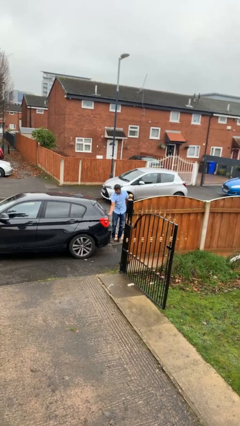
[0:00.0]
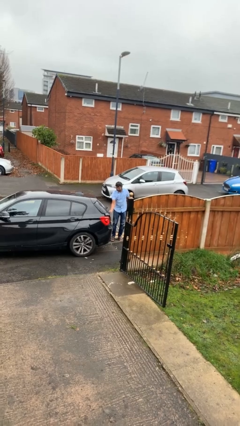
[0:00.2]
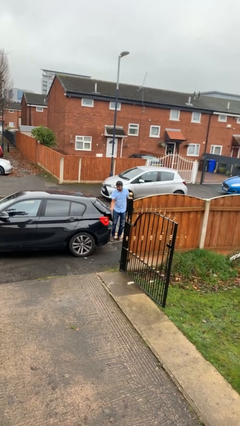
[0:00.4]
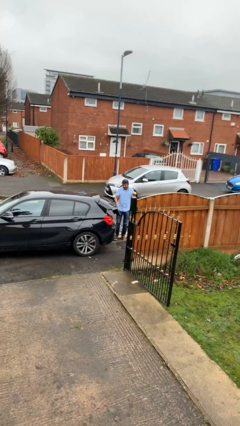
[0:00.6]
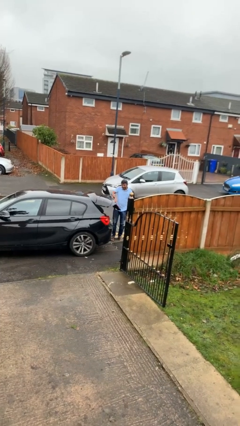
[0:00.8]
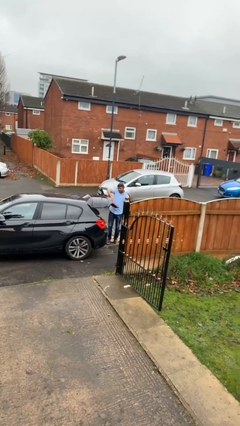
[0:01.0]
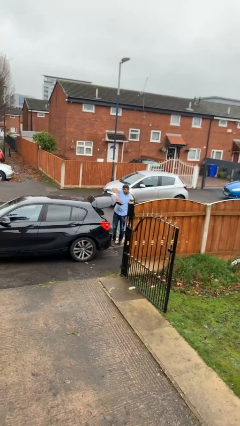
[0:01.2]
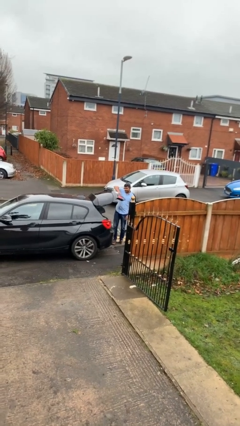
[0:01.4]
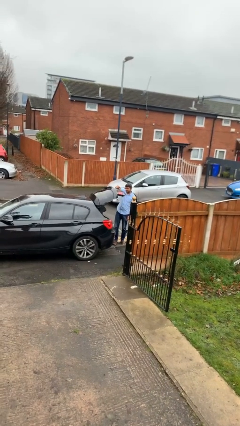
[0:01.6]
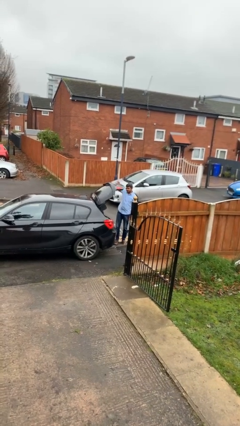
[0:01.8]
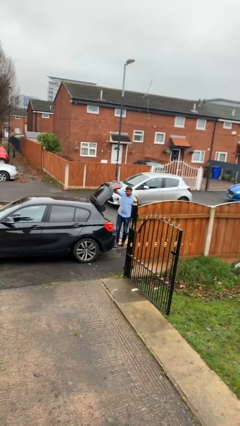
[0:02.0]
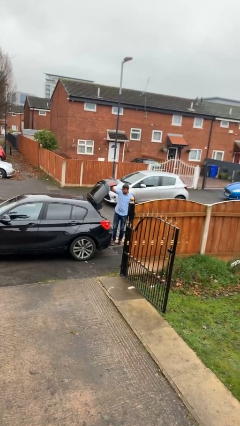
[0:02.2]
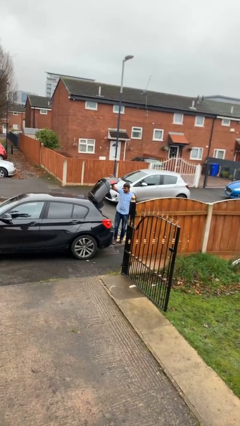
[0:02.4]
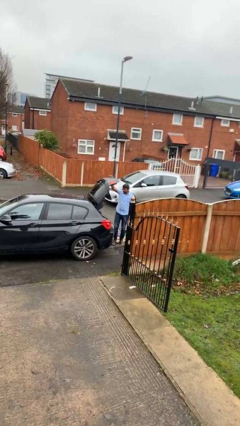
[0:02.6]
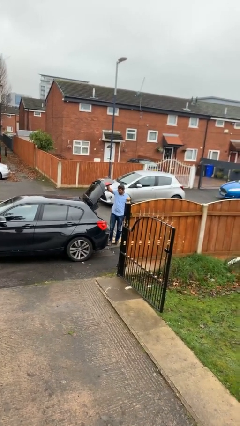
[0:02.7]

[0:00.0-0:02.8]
person opens car trunk

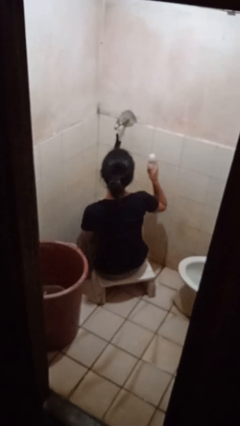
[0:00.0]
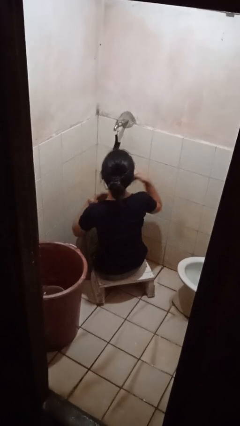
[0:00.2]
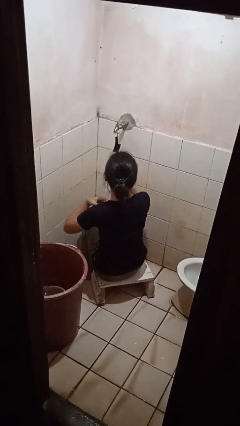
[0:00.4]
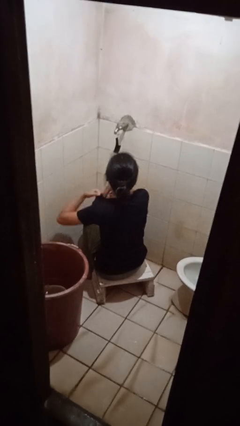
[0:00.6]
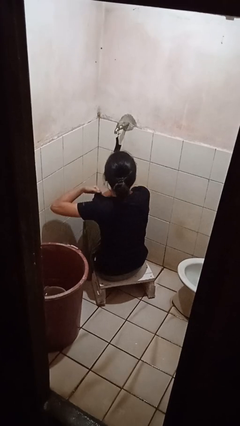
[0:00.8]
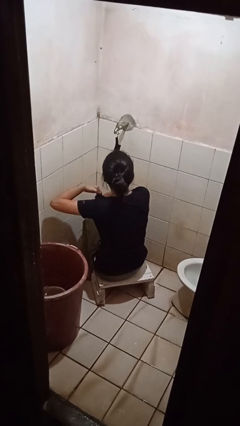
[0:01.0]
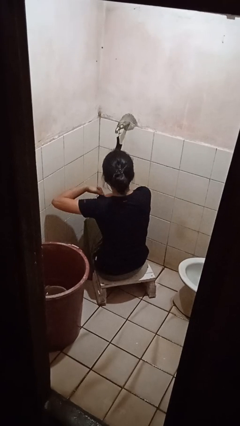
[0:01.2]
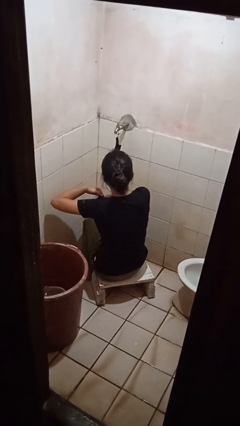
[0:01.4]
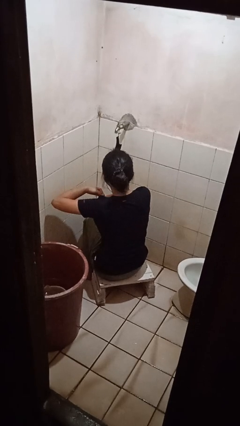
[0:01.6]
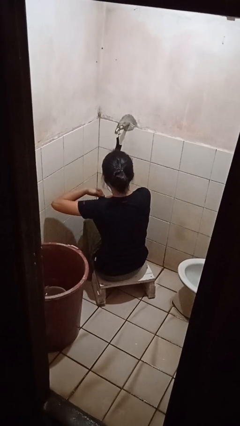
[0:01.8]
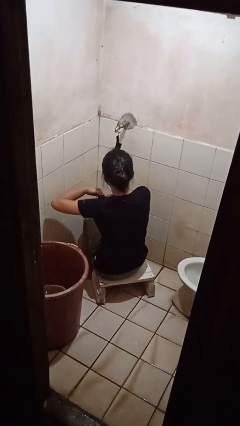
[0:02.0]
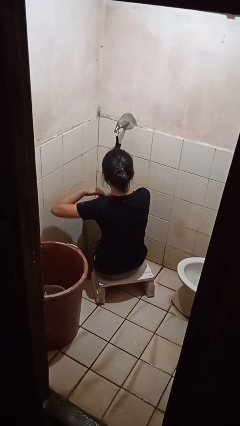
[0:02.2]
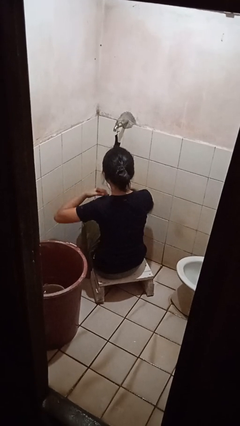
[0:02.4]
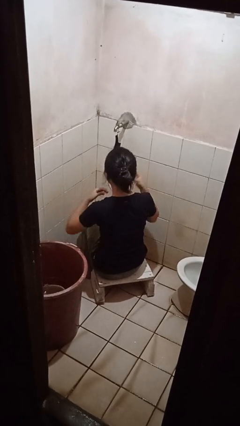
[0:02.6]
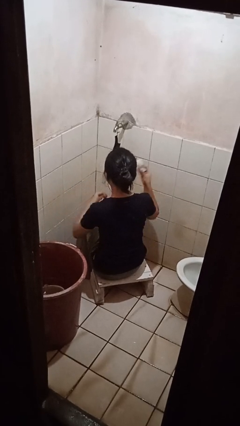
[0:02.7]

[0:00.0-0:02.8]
person applies deodorant

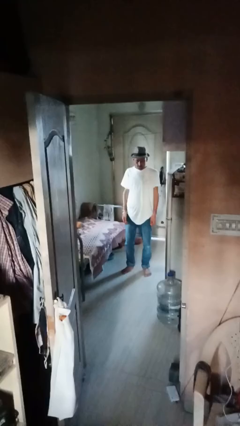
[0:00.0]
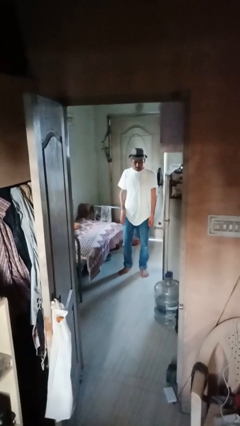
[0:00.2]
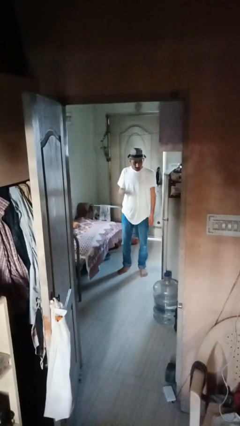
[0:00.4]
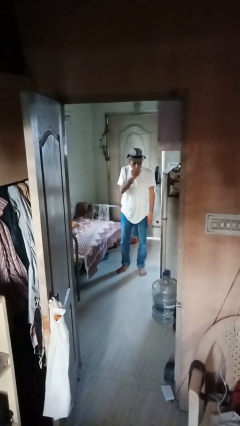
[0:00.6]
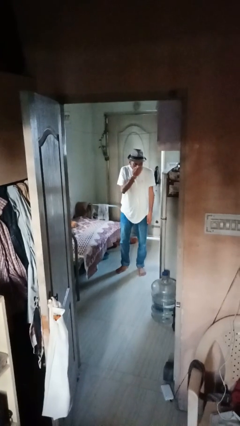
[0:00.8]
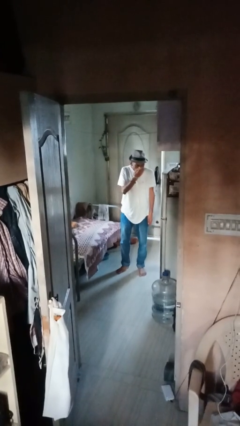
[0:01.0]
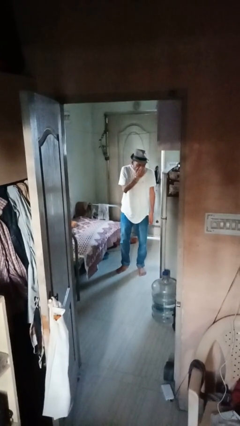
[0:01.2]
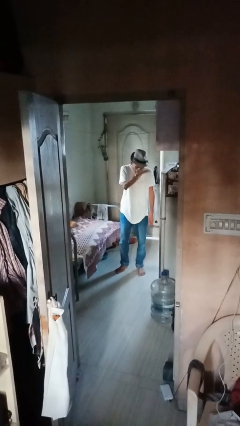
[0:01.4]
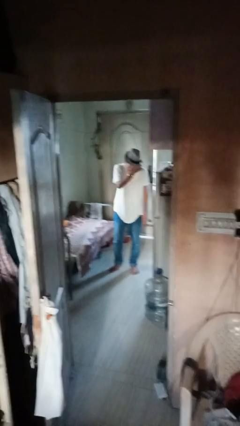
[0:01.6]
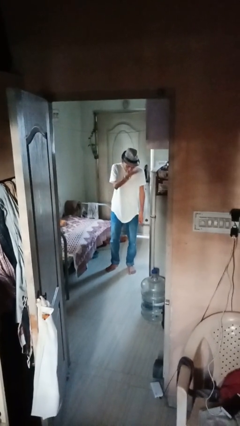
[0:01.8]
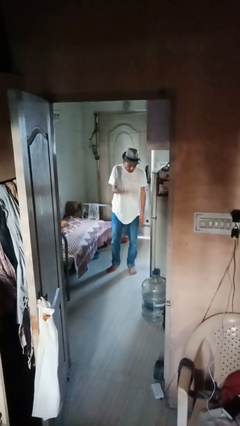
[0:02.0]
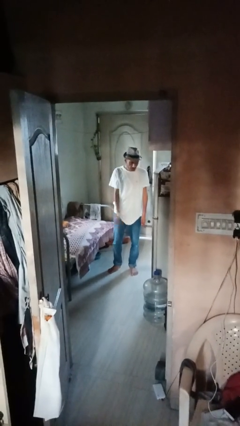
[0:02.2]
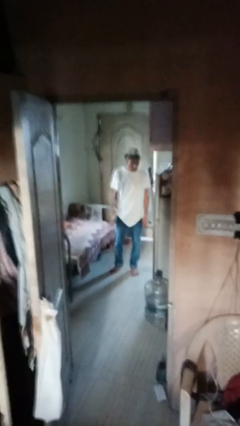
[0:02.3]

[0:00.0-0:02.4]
person gestures blow kiss

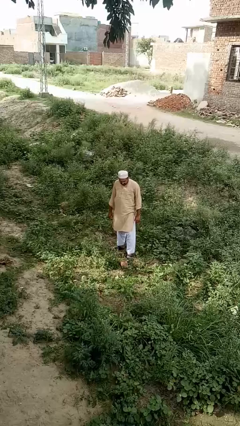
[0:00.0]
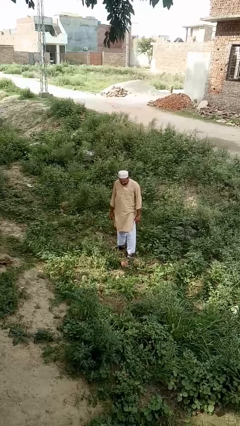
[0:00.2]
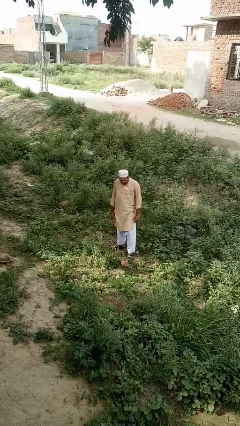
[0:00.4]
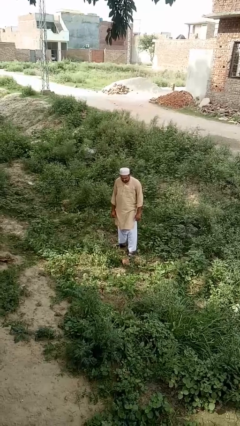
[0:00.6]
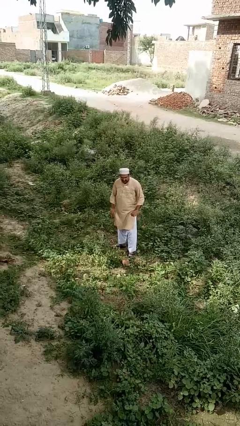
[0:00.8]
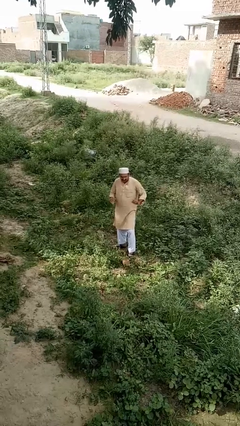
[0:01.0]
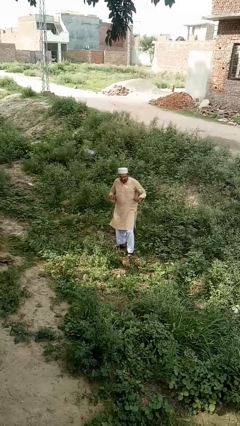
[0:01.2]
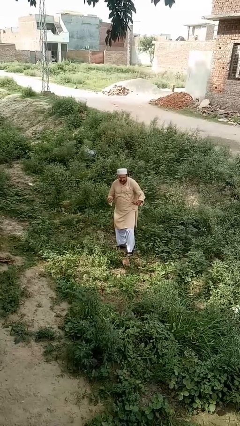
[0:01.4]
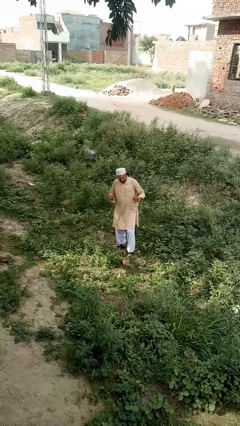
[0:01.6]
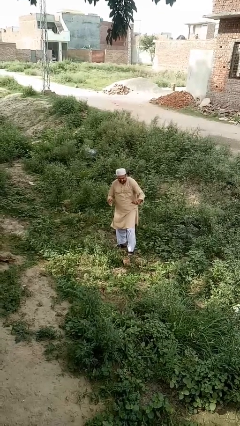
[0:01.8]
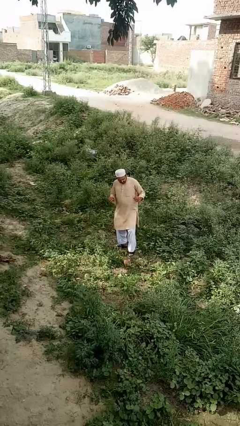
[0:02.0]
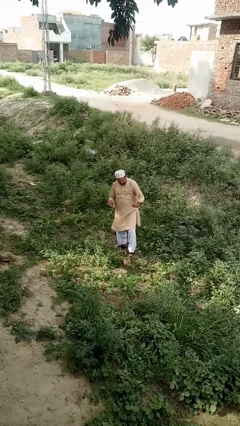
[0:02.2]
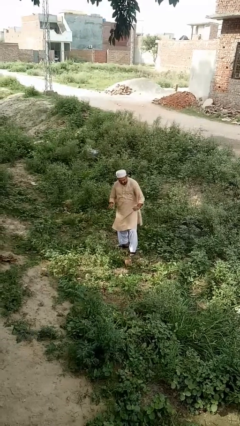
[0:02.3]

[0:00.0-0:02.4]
person dances in place

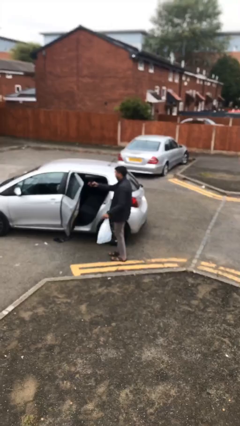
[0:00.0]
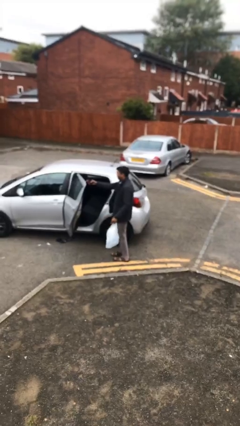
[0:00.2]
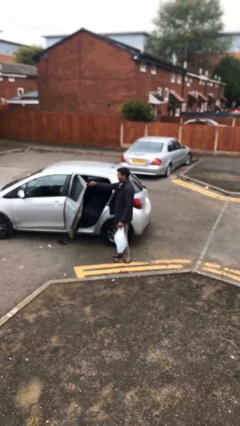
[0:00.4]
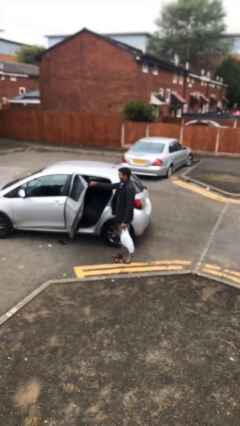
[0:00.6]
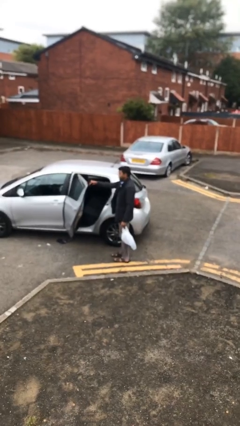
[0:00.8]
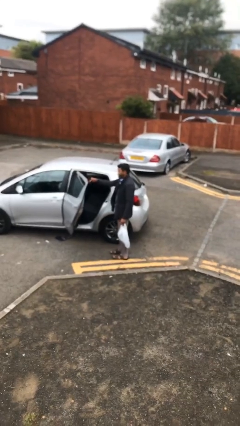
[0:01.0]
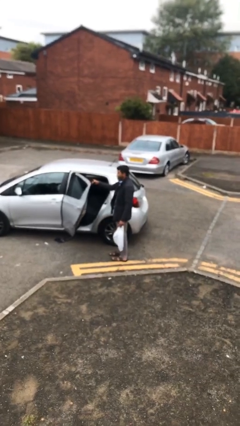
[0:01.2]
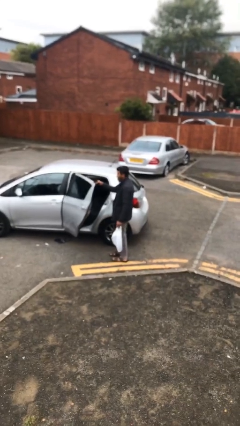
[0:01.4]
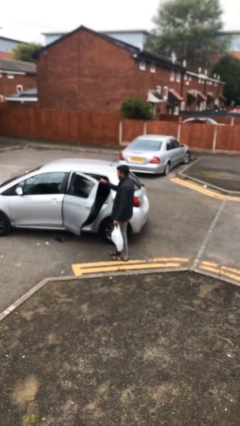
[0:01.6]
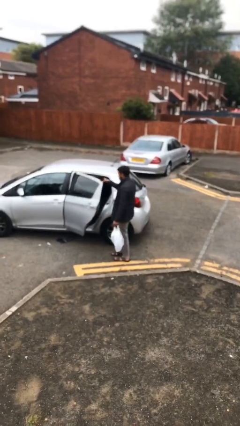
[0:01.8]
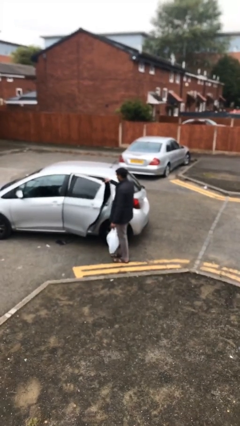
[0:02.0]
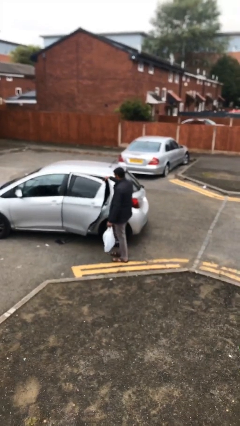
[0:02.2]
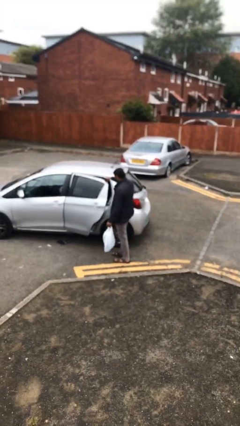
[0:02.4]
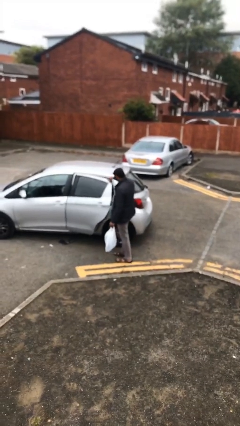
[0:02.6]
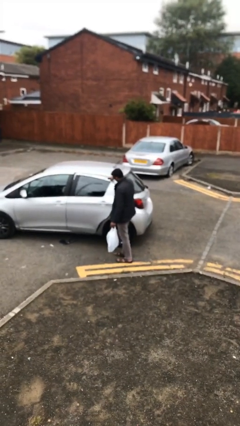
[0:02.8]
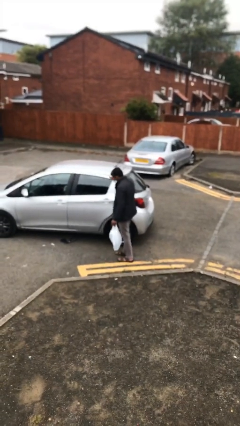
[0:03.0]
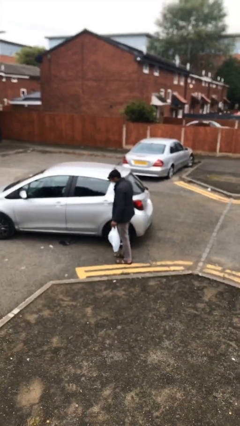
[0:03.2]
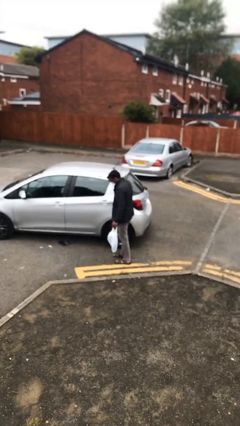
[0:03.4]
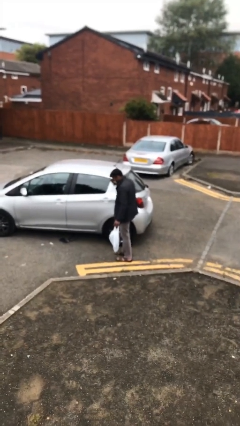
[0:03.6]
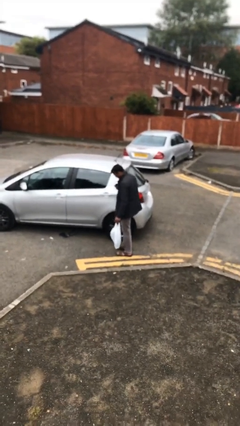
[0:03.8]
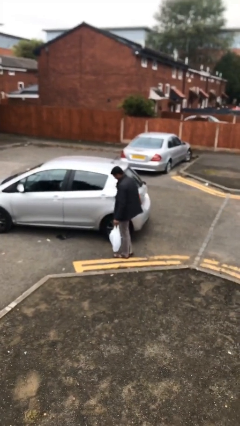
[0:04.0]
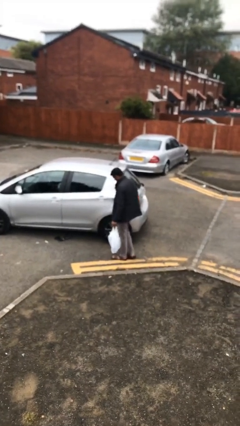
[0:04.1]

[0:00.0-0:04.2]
person closes car door

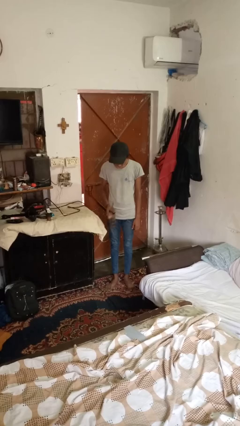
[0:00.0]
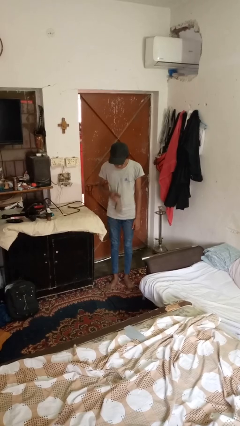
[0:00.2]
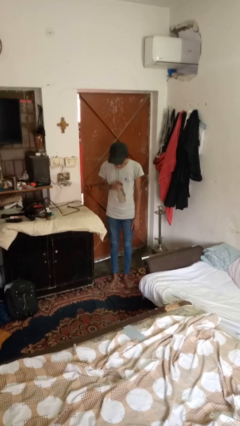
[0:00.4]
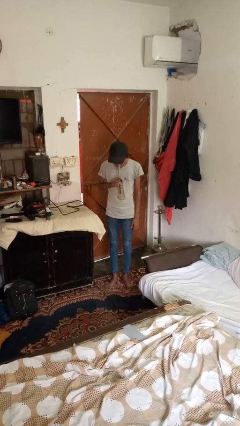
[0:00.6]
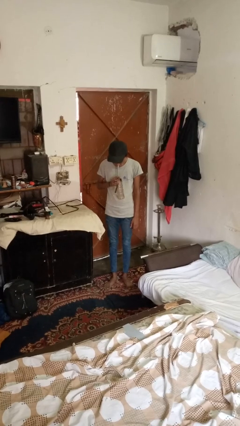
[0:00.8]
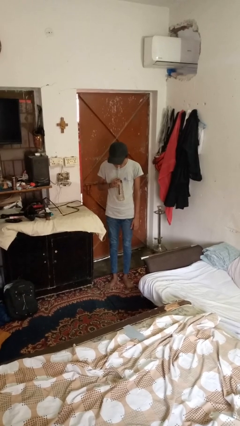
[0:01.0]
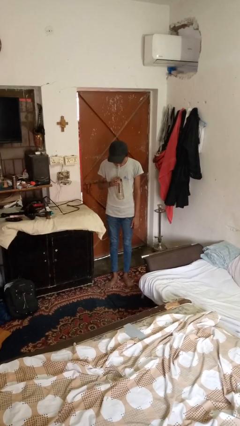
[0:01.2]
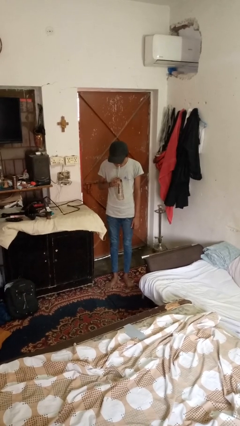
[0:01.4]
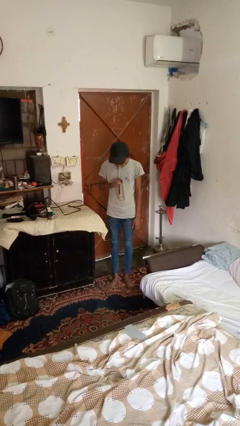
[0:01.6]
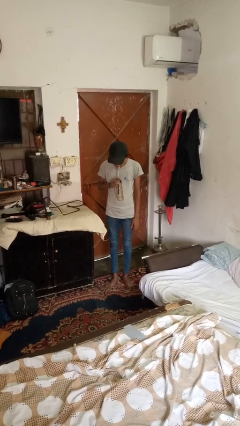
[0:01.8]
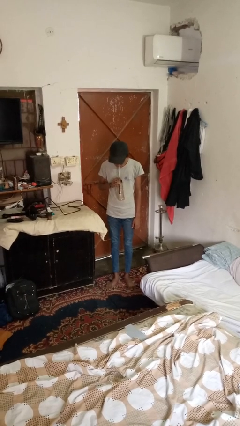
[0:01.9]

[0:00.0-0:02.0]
person drinks from straw

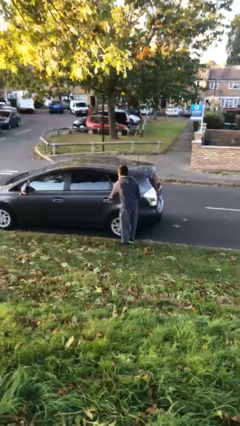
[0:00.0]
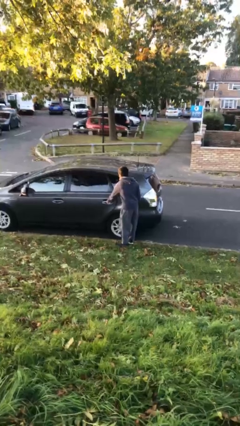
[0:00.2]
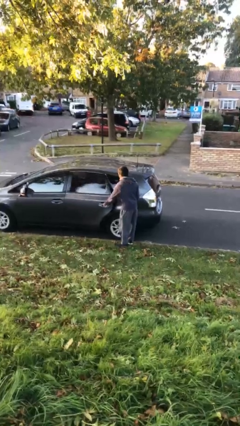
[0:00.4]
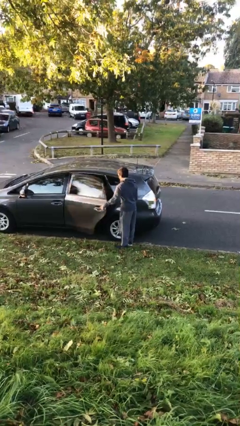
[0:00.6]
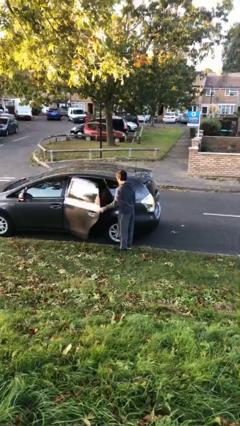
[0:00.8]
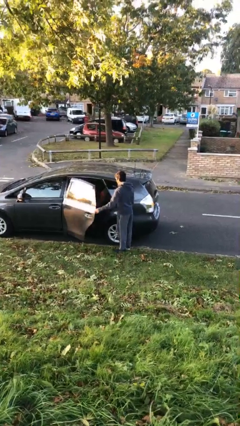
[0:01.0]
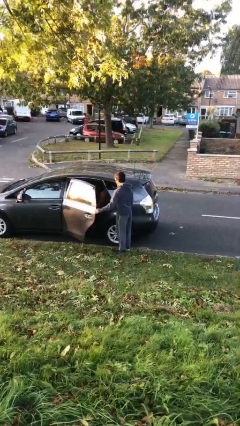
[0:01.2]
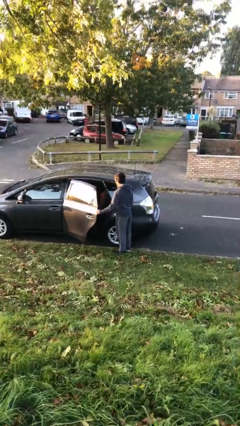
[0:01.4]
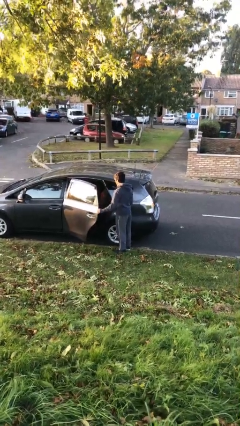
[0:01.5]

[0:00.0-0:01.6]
person opens car door
